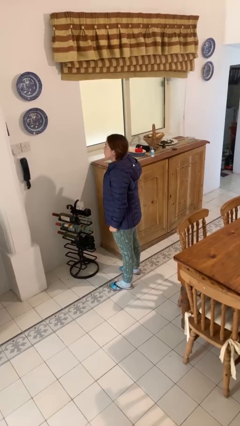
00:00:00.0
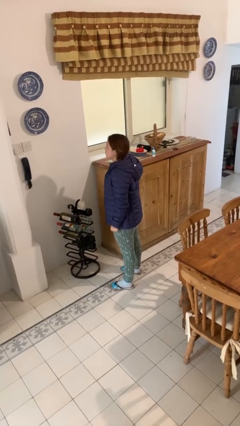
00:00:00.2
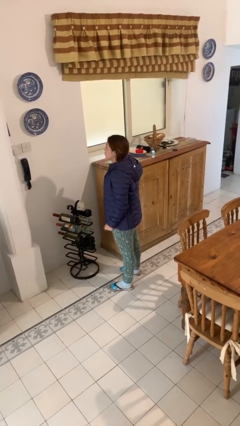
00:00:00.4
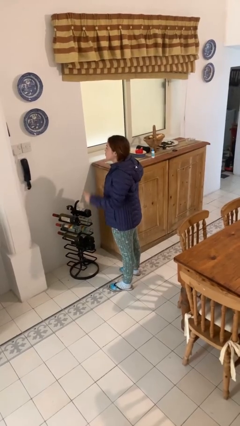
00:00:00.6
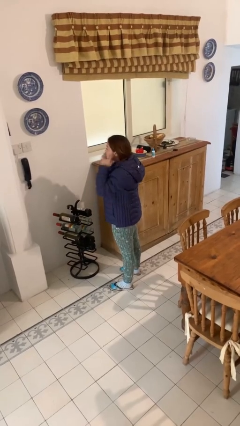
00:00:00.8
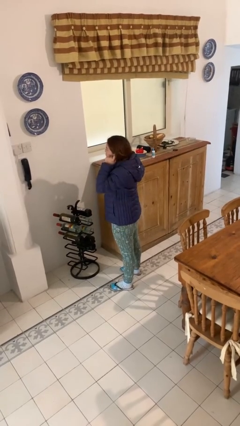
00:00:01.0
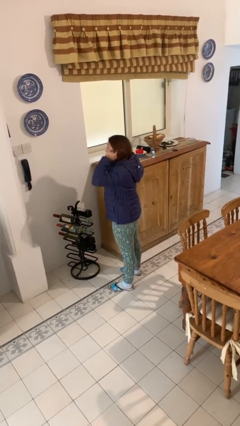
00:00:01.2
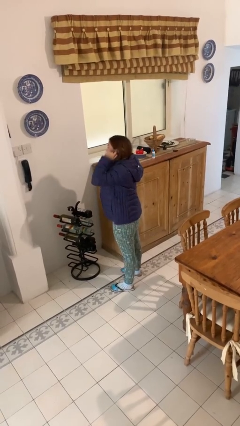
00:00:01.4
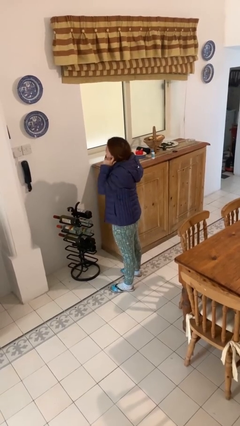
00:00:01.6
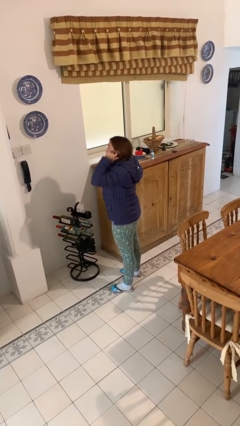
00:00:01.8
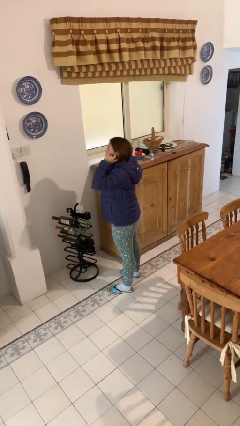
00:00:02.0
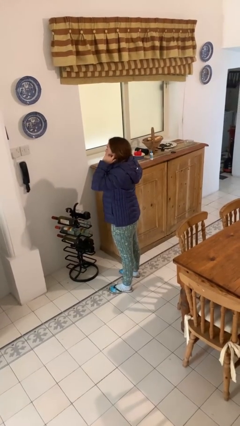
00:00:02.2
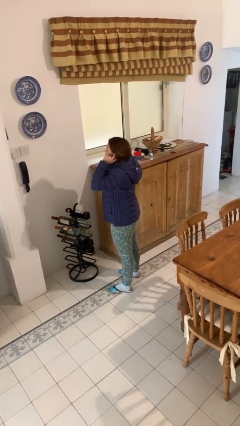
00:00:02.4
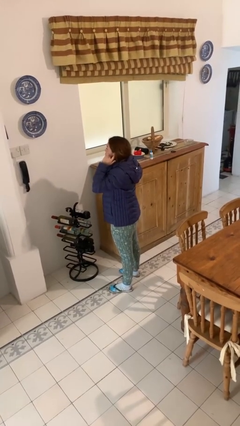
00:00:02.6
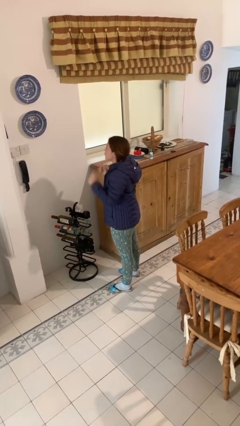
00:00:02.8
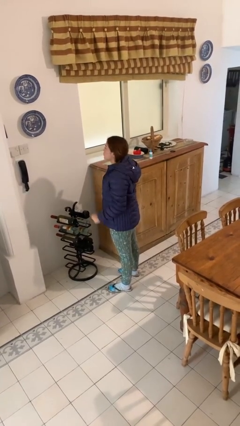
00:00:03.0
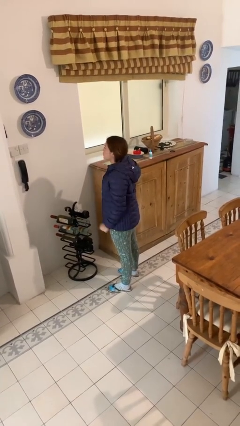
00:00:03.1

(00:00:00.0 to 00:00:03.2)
person puts fingers in ear

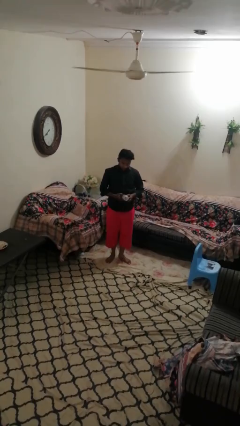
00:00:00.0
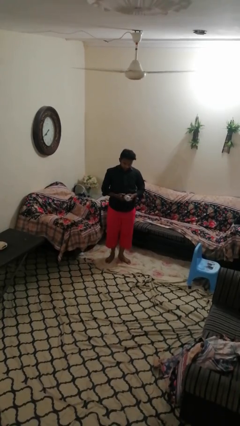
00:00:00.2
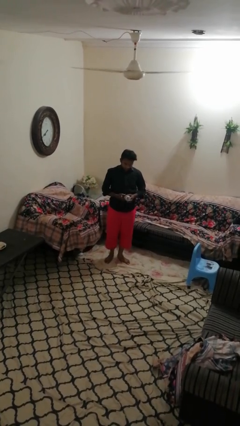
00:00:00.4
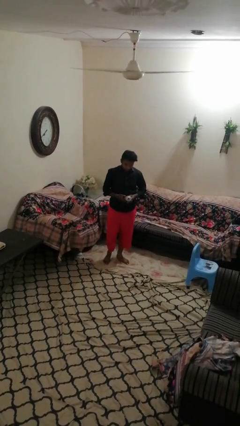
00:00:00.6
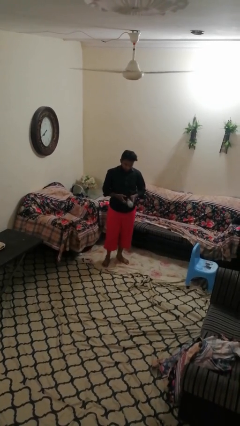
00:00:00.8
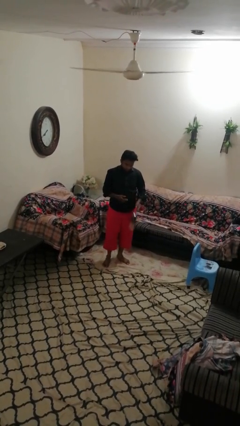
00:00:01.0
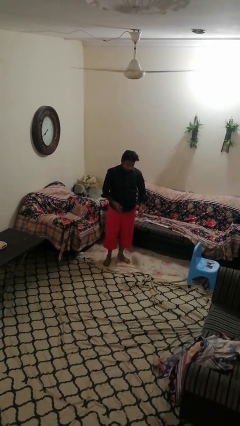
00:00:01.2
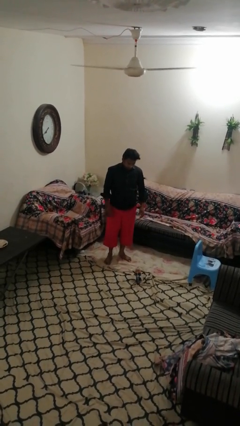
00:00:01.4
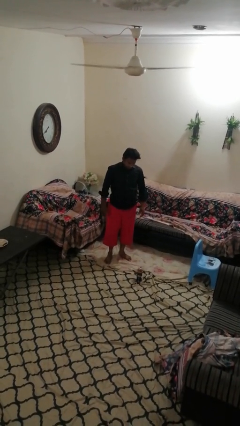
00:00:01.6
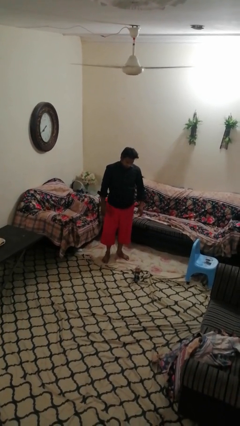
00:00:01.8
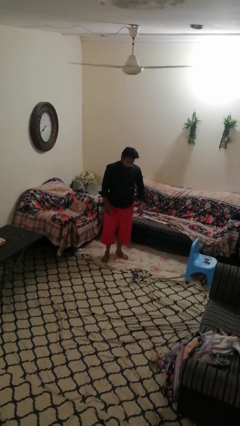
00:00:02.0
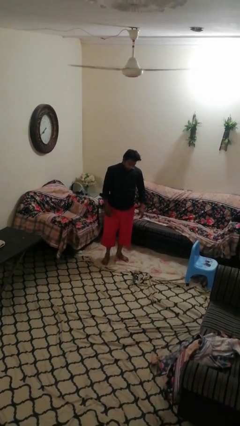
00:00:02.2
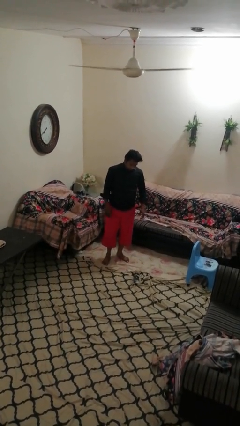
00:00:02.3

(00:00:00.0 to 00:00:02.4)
person drops object

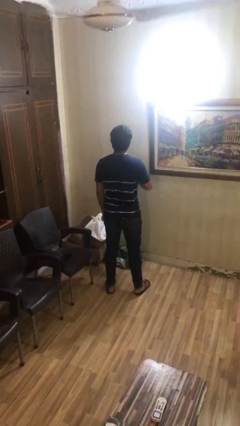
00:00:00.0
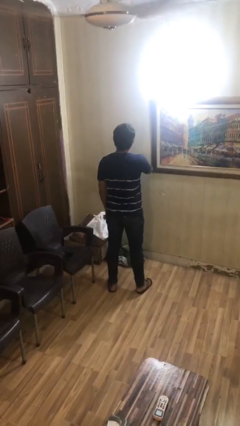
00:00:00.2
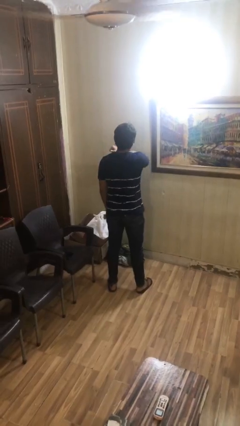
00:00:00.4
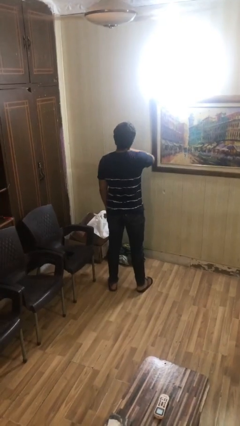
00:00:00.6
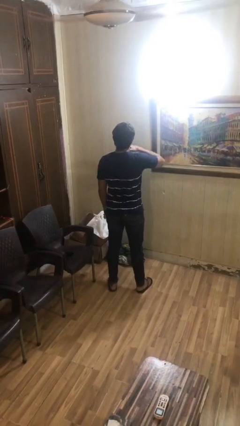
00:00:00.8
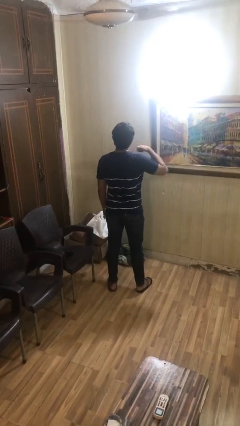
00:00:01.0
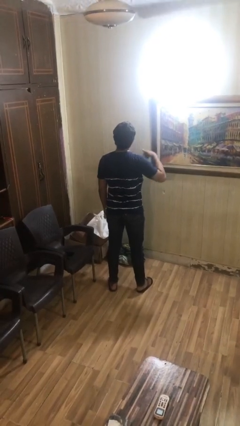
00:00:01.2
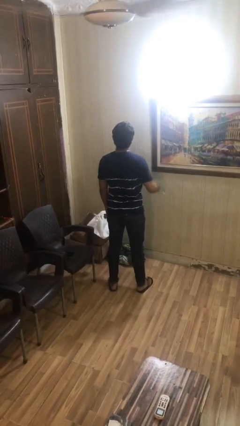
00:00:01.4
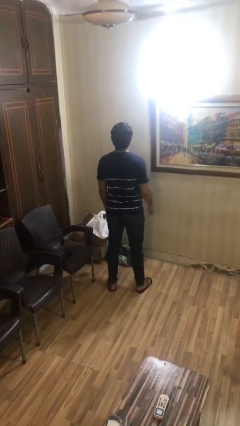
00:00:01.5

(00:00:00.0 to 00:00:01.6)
person gestures cut

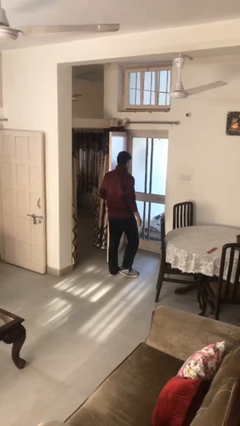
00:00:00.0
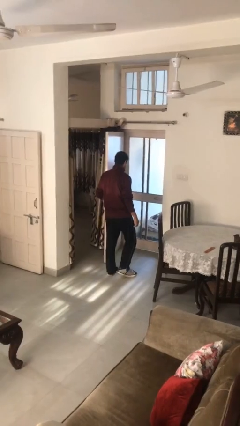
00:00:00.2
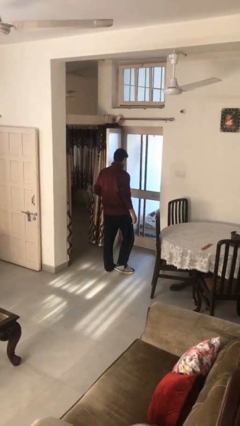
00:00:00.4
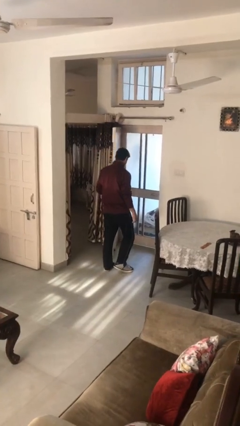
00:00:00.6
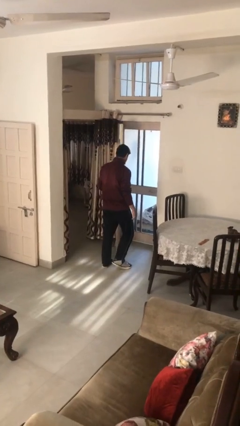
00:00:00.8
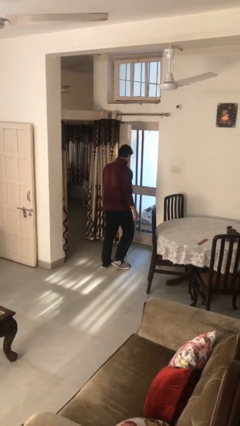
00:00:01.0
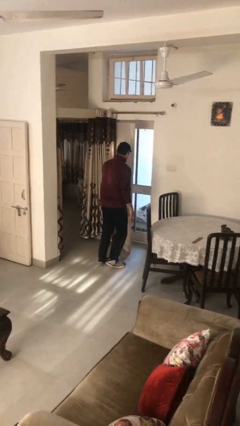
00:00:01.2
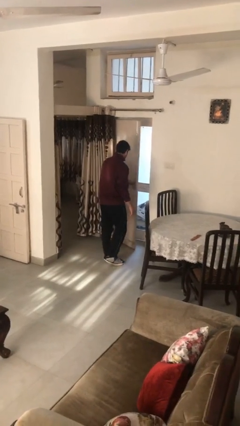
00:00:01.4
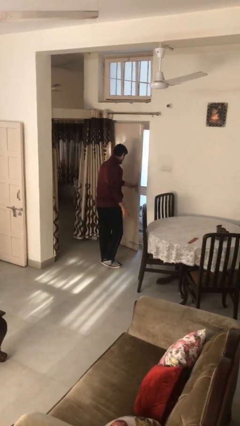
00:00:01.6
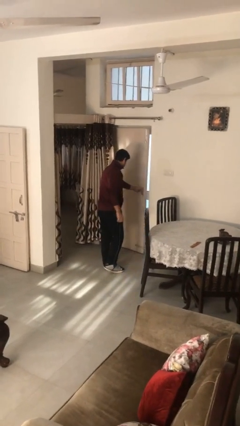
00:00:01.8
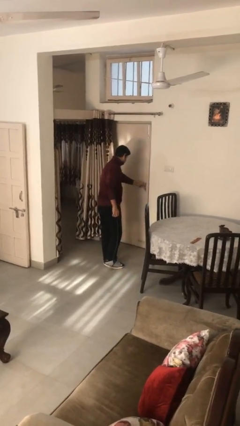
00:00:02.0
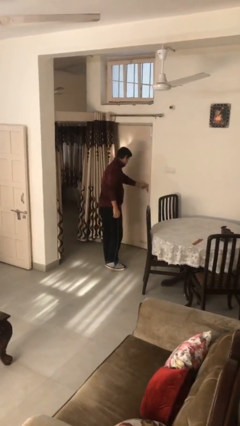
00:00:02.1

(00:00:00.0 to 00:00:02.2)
person closes facility door

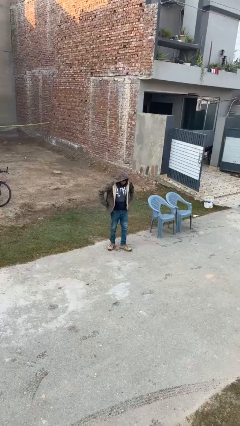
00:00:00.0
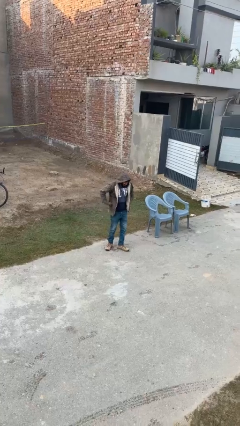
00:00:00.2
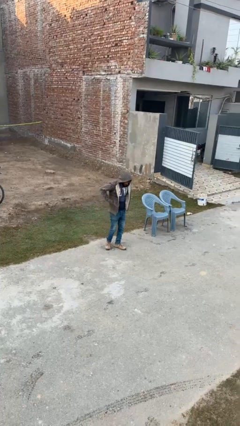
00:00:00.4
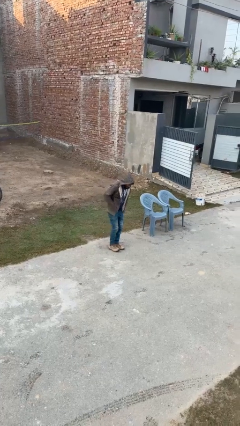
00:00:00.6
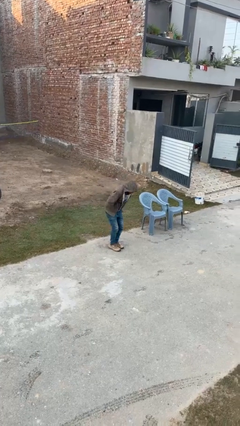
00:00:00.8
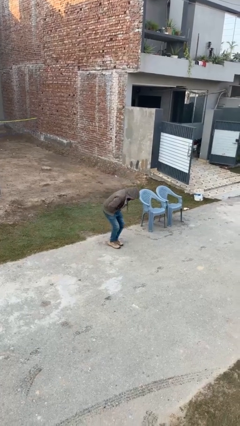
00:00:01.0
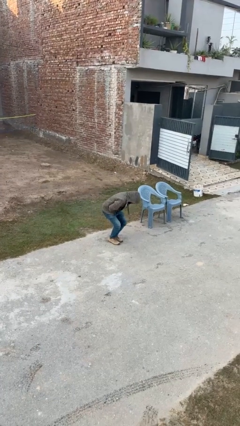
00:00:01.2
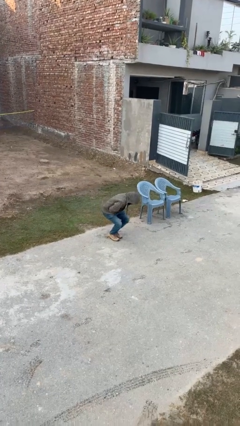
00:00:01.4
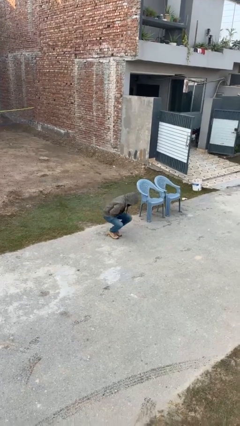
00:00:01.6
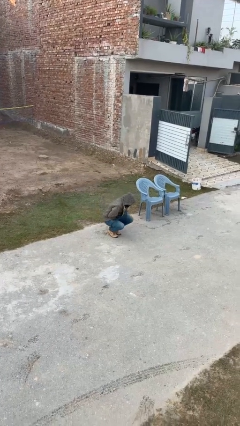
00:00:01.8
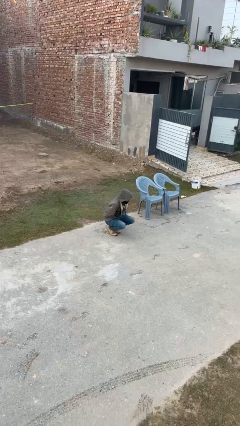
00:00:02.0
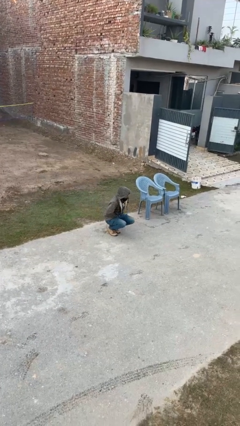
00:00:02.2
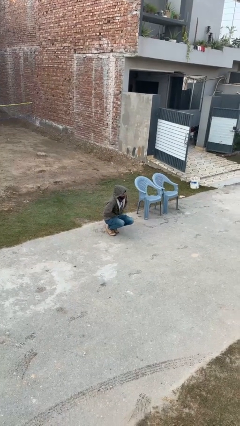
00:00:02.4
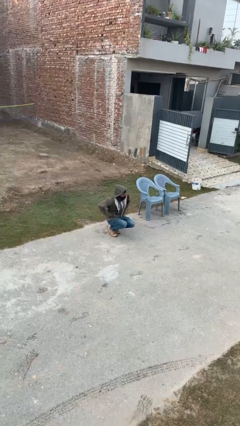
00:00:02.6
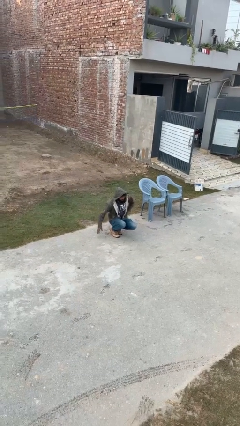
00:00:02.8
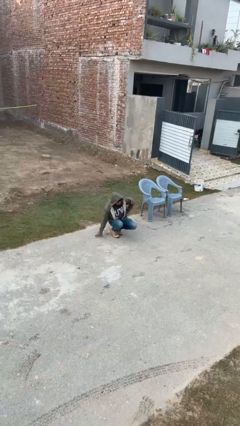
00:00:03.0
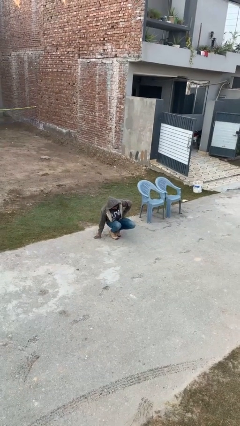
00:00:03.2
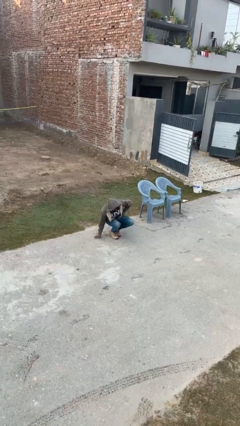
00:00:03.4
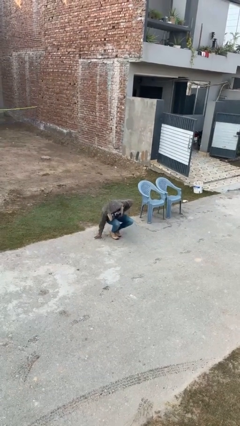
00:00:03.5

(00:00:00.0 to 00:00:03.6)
person sits down

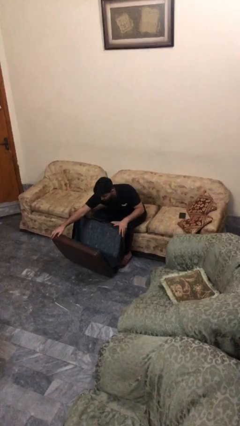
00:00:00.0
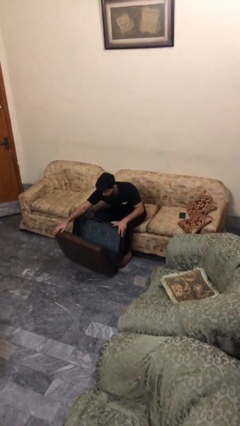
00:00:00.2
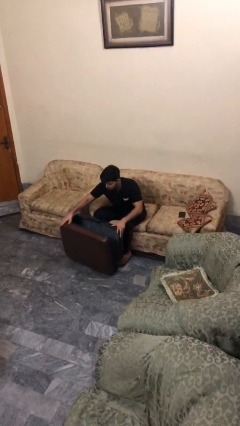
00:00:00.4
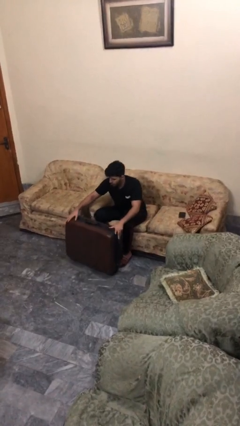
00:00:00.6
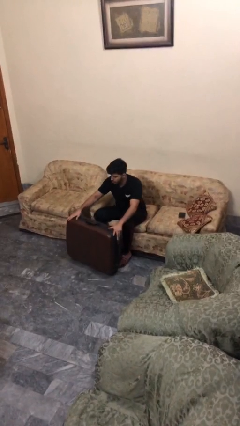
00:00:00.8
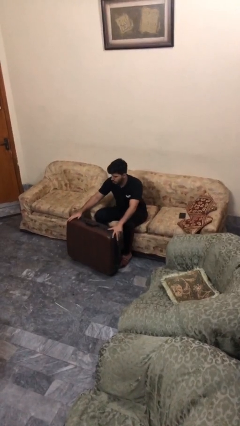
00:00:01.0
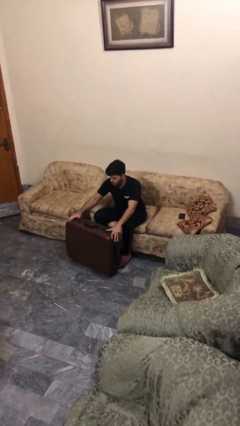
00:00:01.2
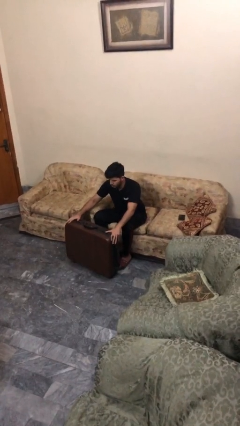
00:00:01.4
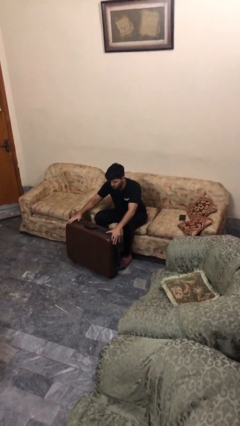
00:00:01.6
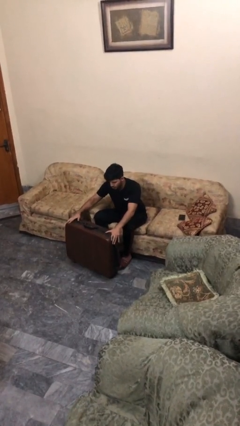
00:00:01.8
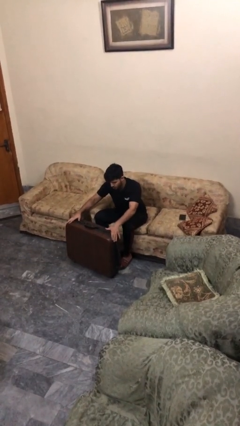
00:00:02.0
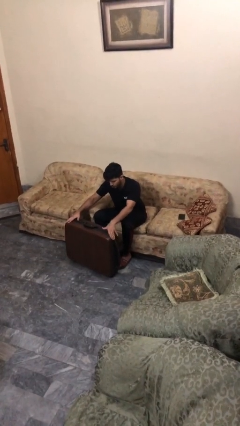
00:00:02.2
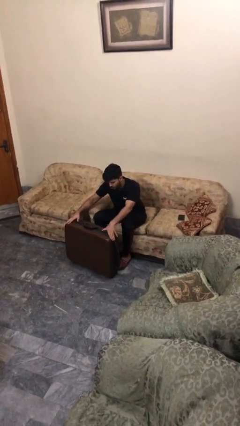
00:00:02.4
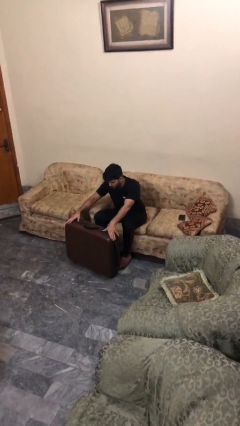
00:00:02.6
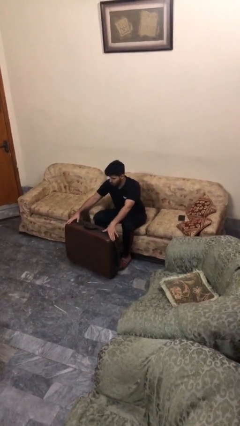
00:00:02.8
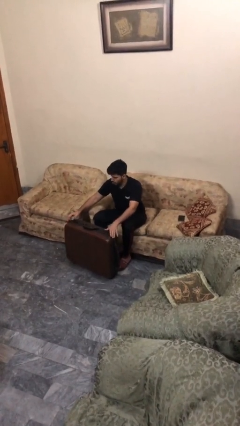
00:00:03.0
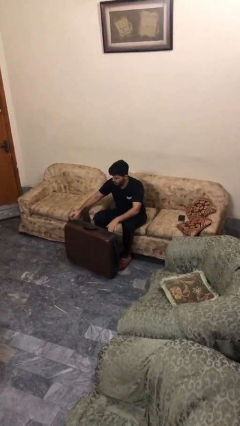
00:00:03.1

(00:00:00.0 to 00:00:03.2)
person closes suitcase

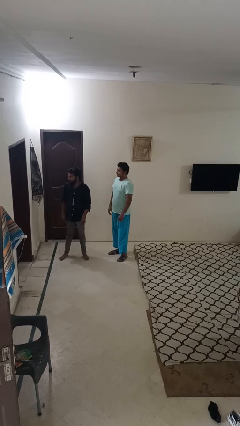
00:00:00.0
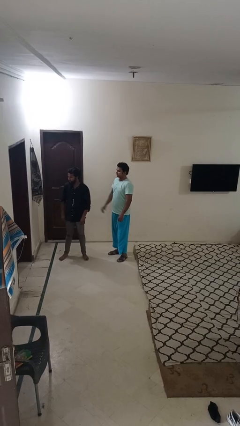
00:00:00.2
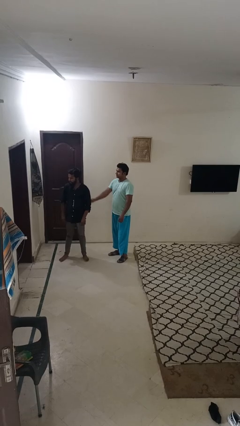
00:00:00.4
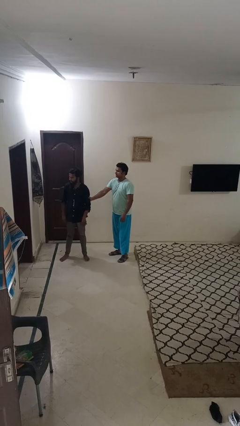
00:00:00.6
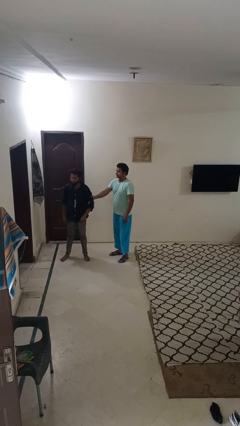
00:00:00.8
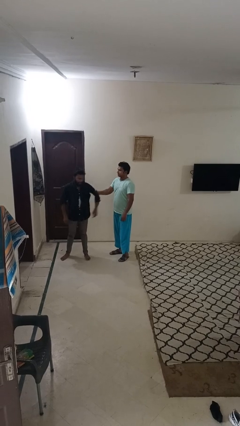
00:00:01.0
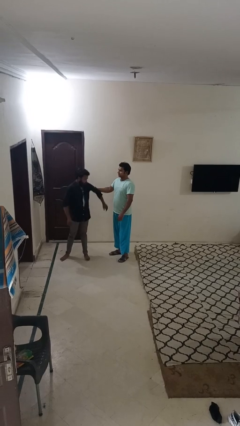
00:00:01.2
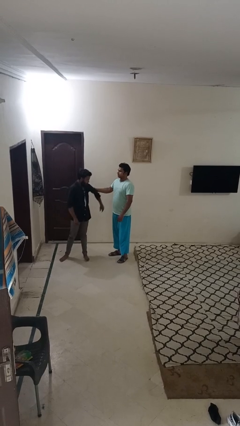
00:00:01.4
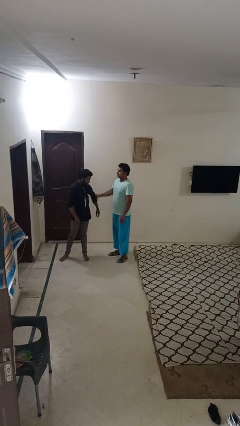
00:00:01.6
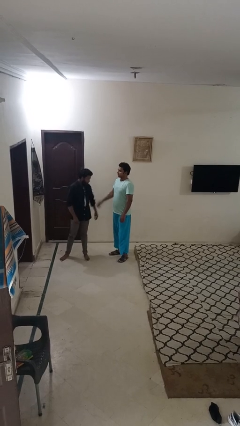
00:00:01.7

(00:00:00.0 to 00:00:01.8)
person grabs person by bicep
